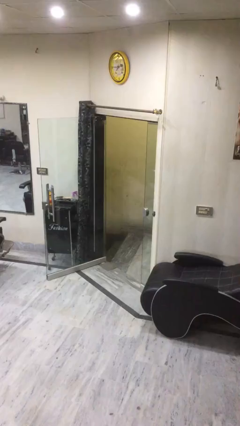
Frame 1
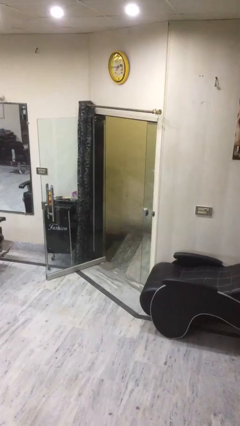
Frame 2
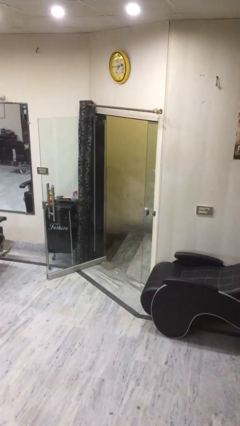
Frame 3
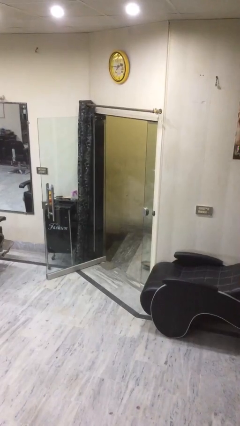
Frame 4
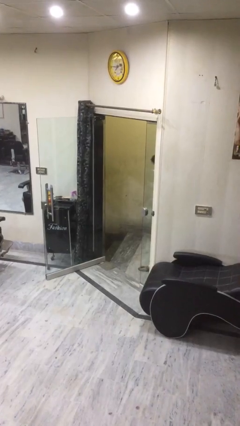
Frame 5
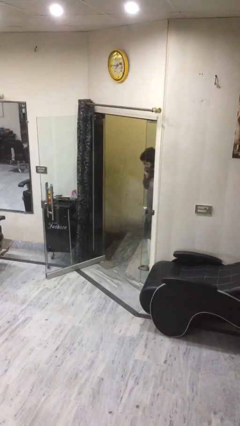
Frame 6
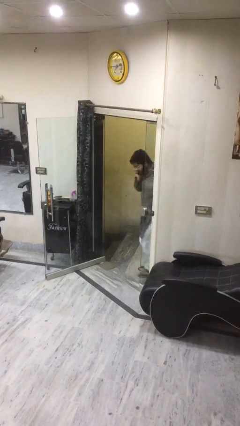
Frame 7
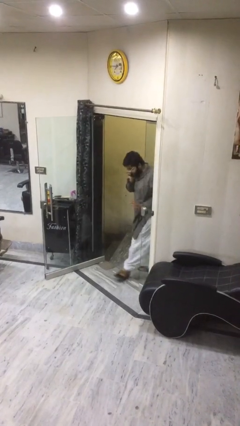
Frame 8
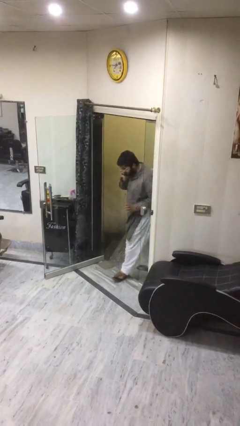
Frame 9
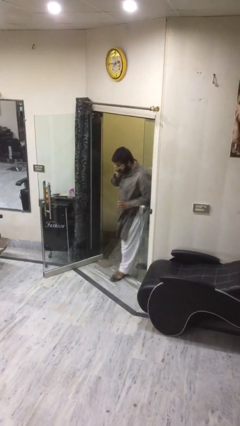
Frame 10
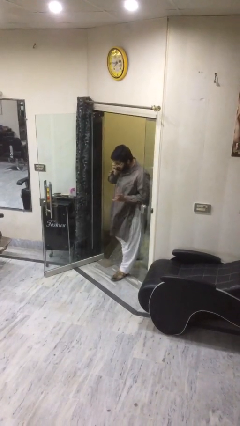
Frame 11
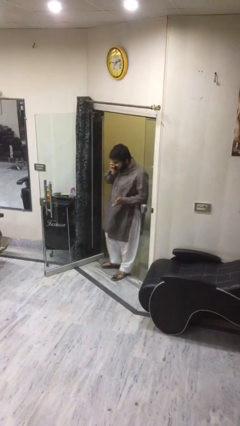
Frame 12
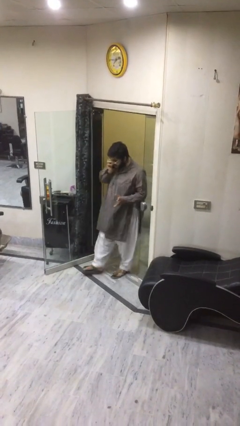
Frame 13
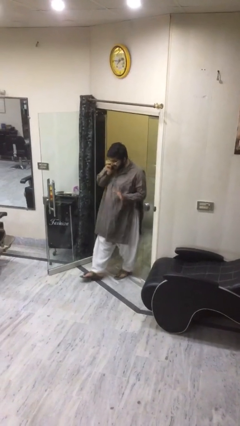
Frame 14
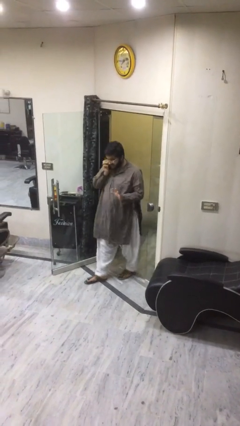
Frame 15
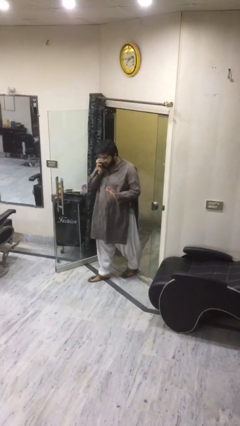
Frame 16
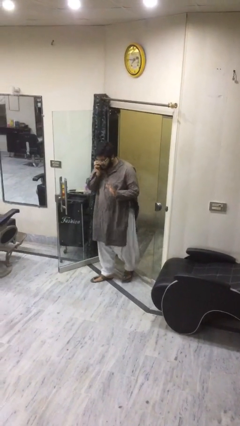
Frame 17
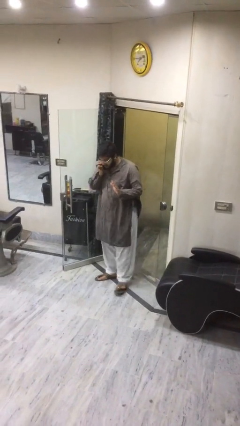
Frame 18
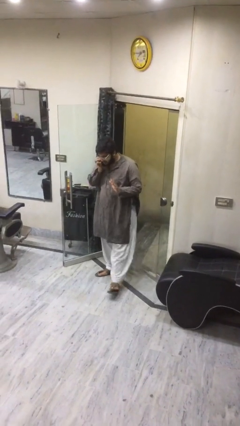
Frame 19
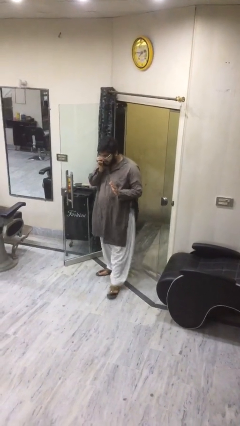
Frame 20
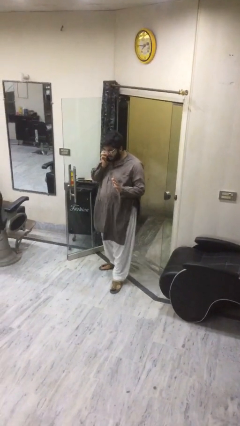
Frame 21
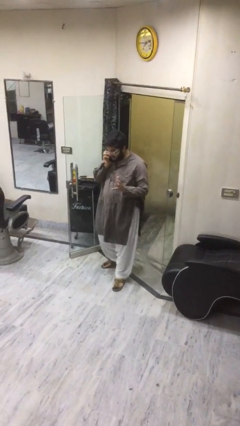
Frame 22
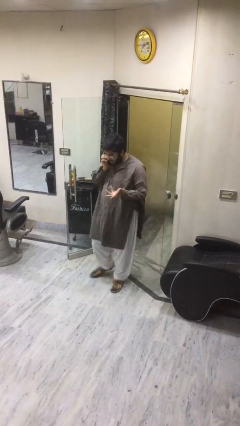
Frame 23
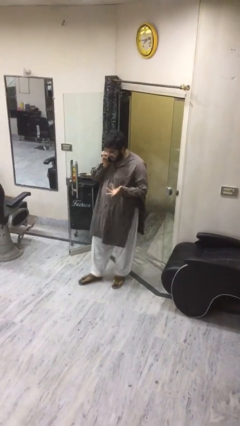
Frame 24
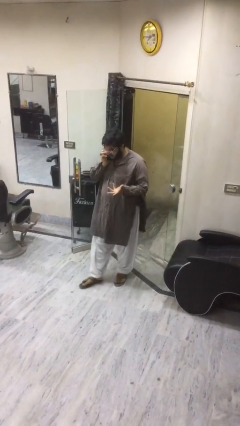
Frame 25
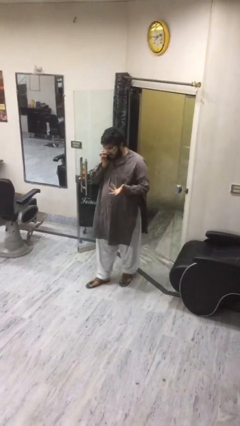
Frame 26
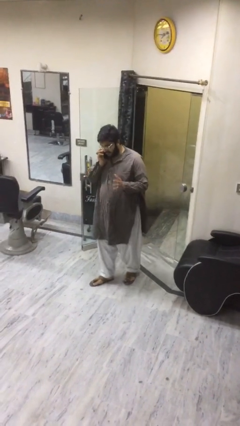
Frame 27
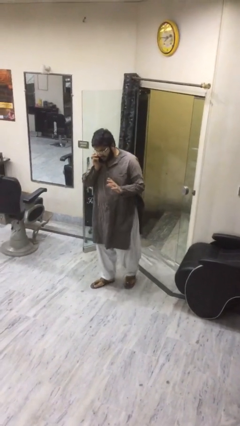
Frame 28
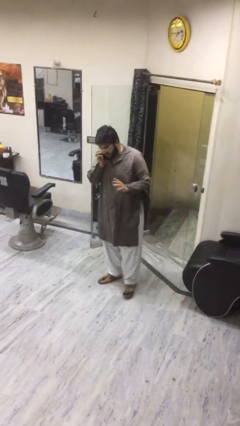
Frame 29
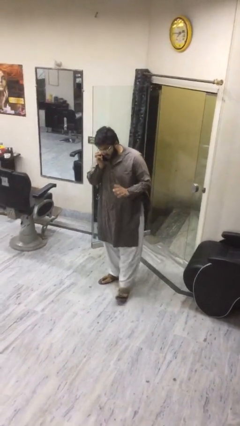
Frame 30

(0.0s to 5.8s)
person enters scene through structure

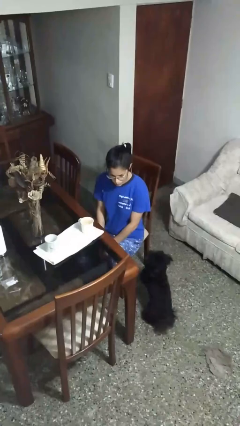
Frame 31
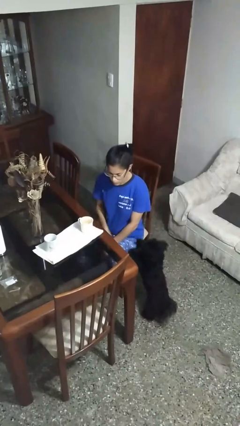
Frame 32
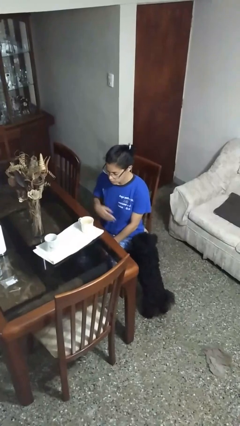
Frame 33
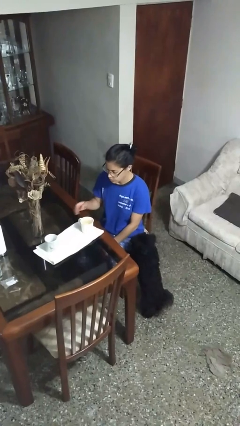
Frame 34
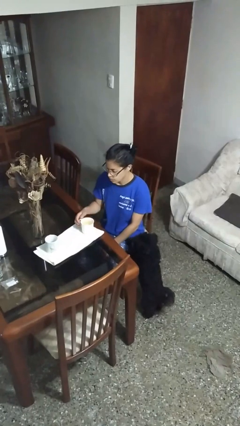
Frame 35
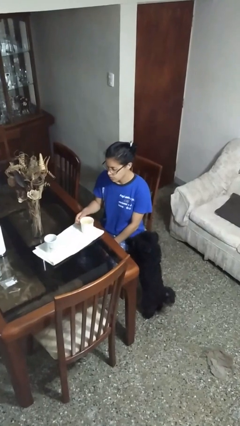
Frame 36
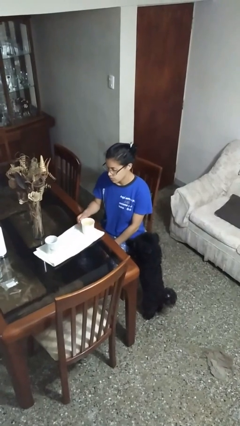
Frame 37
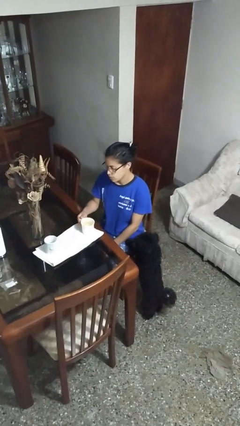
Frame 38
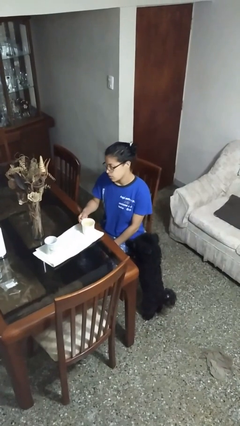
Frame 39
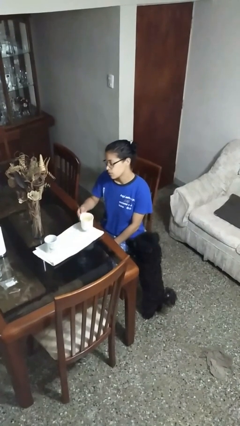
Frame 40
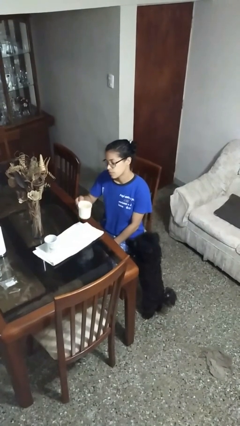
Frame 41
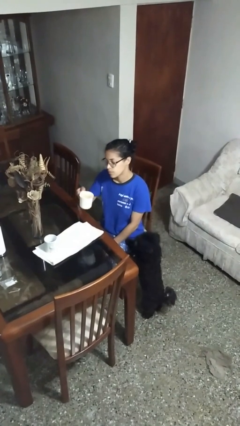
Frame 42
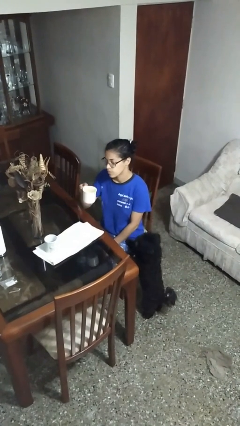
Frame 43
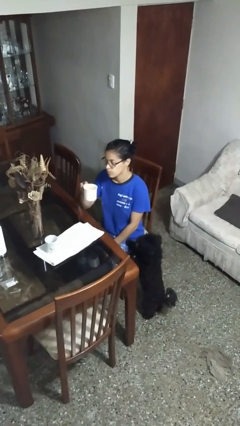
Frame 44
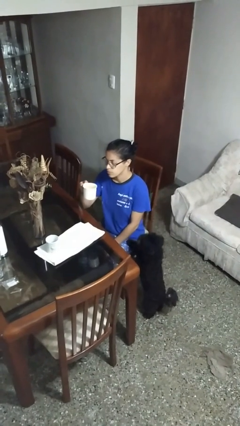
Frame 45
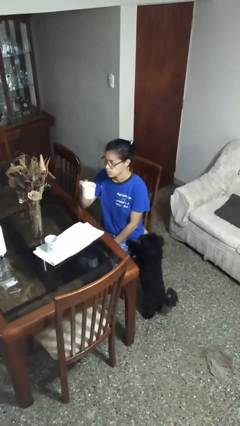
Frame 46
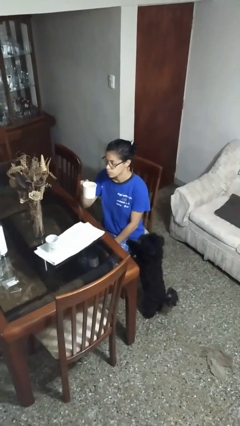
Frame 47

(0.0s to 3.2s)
person picks up object from table

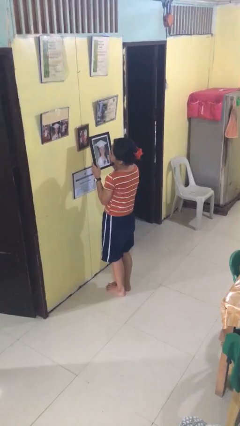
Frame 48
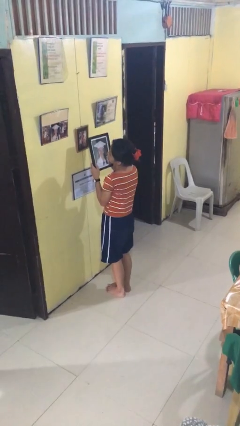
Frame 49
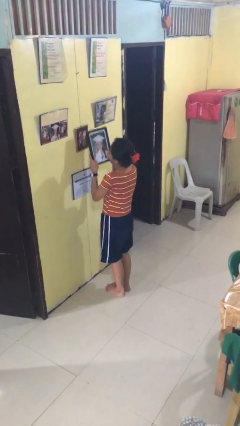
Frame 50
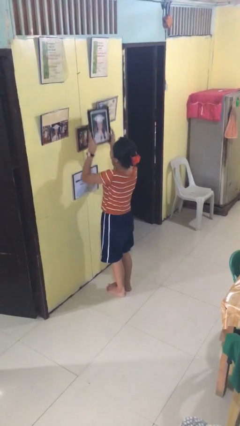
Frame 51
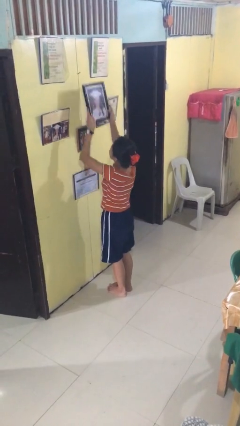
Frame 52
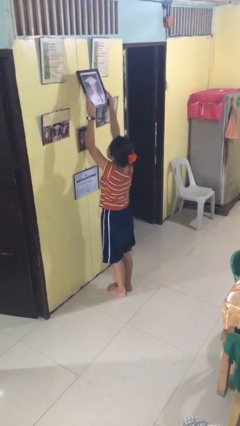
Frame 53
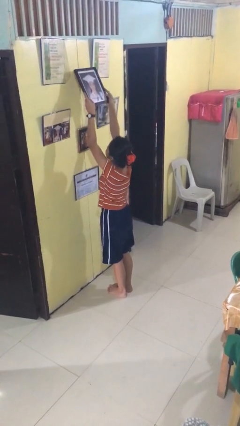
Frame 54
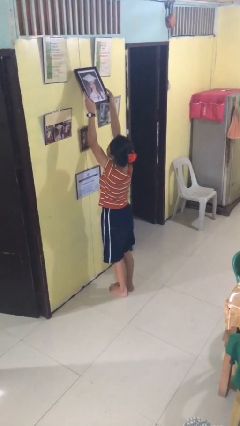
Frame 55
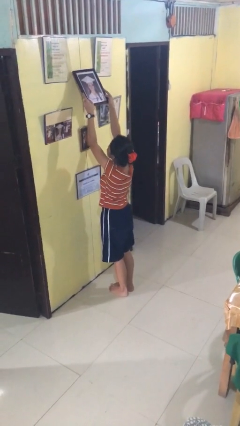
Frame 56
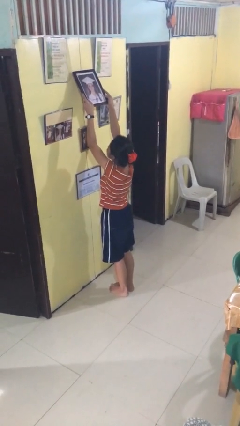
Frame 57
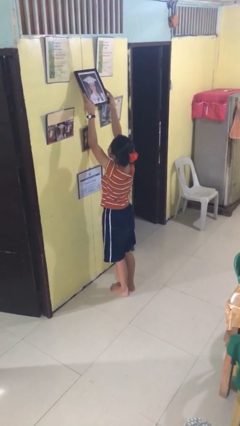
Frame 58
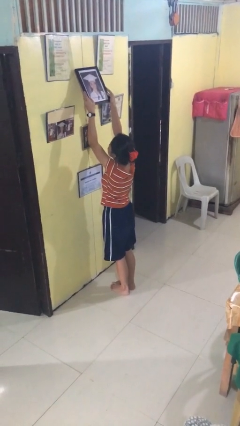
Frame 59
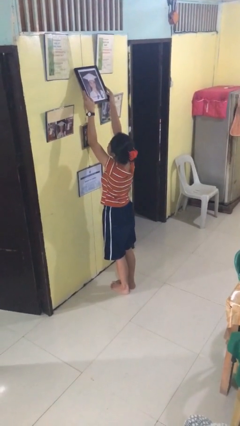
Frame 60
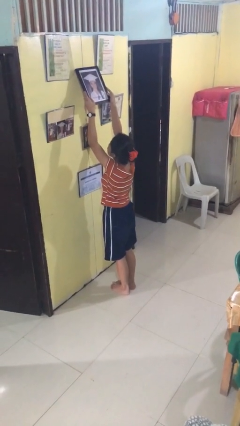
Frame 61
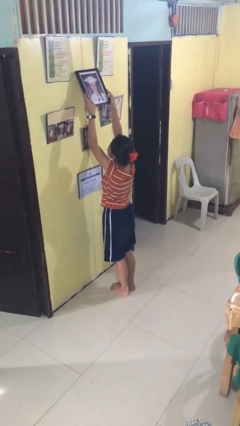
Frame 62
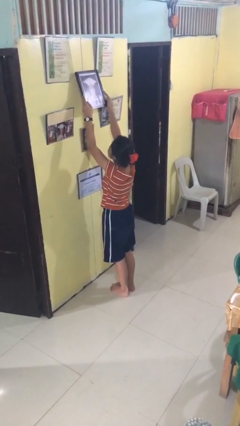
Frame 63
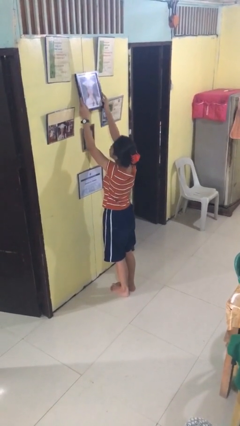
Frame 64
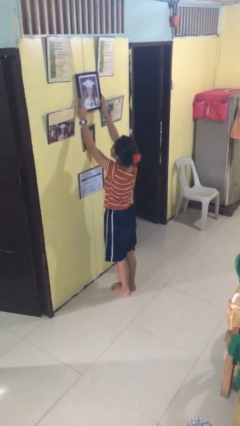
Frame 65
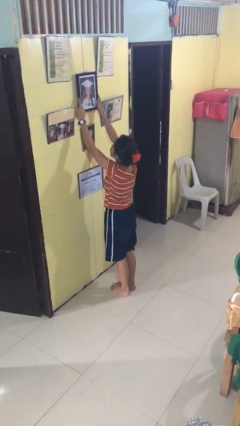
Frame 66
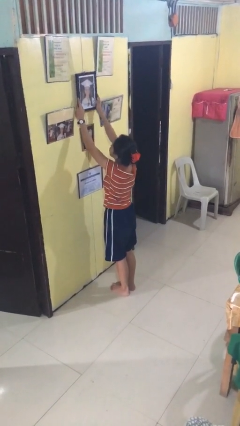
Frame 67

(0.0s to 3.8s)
person puts up picture frame

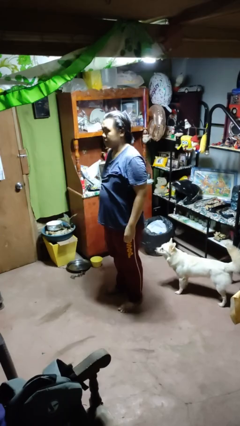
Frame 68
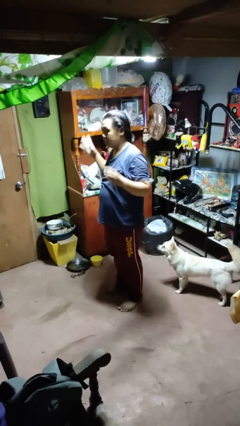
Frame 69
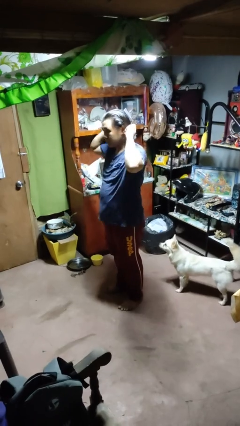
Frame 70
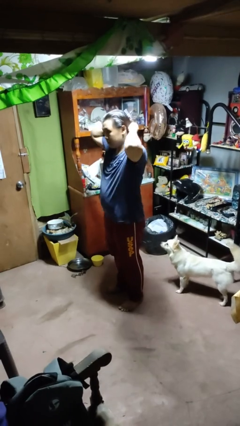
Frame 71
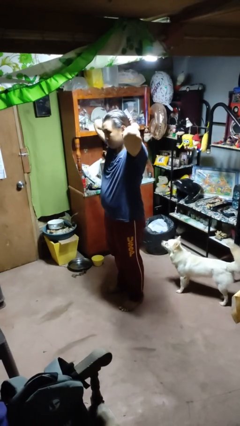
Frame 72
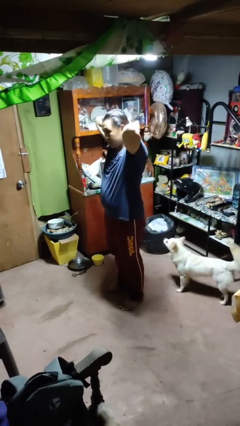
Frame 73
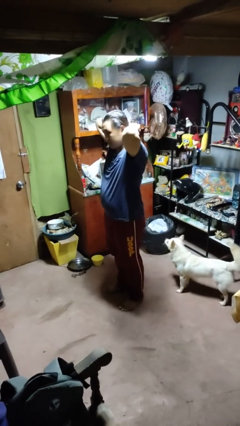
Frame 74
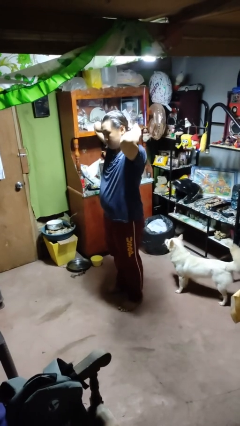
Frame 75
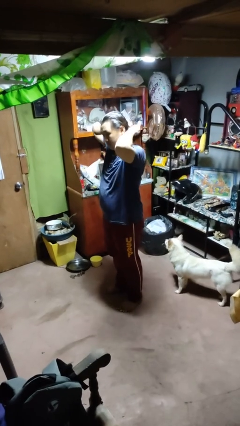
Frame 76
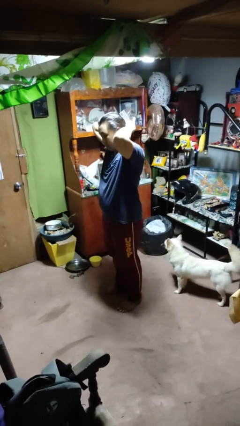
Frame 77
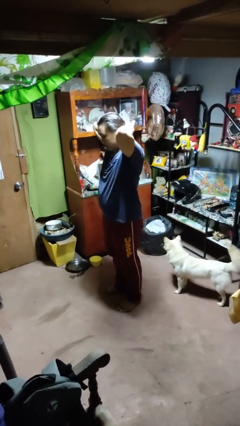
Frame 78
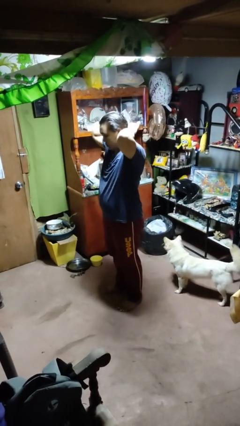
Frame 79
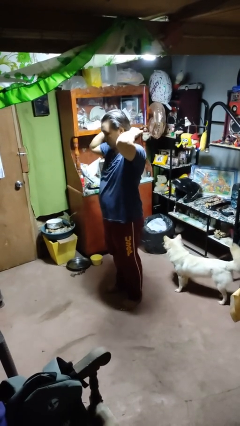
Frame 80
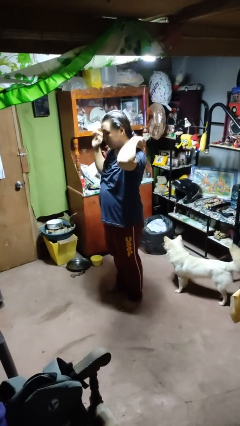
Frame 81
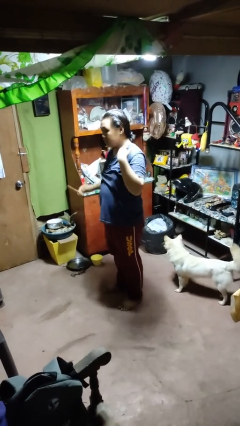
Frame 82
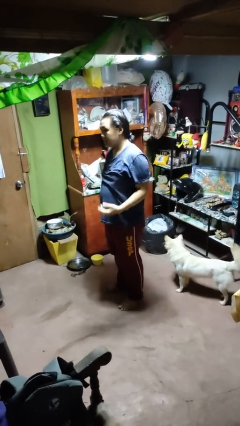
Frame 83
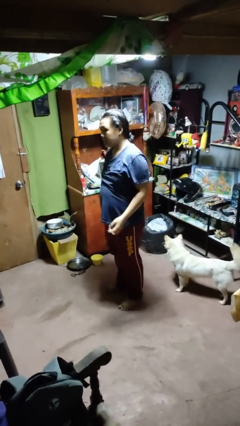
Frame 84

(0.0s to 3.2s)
person puts hair in ponytail

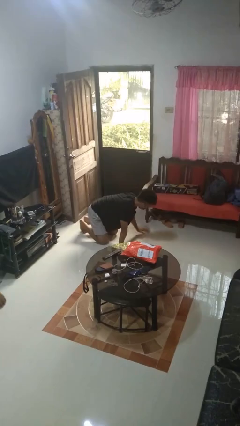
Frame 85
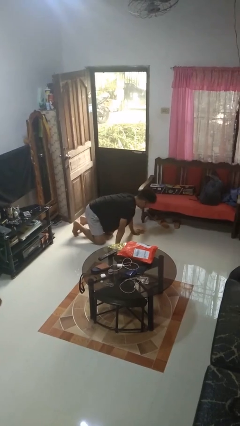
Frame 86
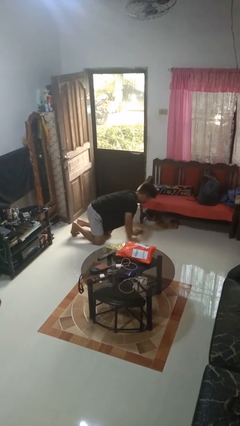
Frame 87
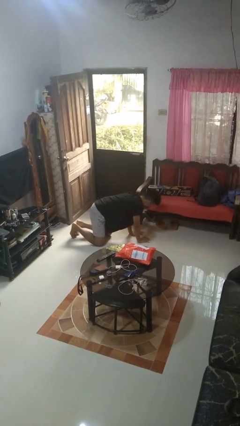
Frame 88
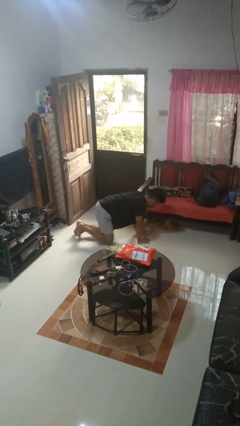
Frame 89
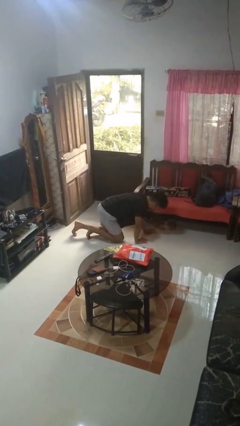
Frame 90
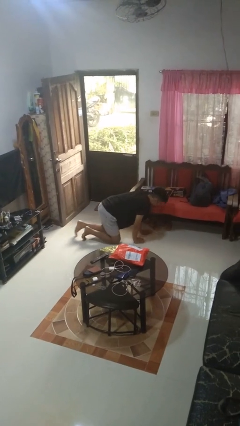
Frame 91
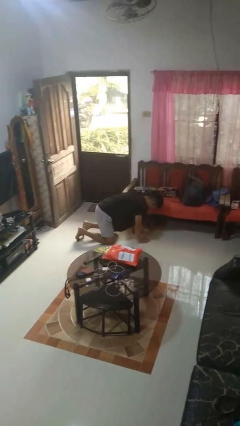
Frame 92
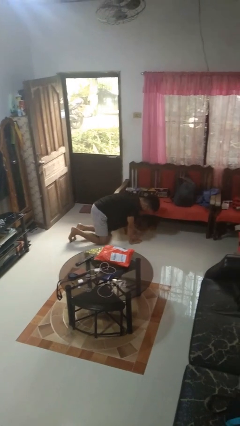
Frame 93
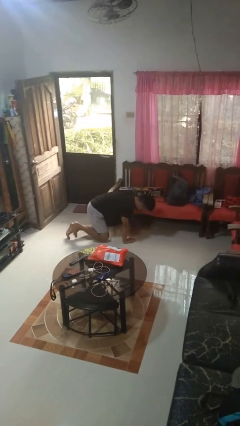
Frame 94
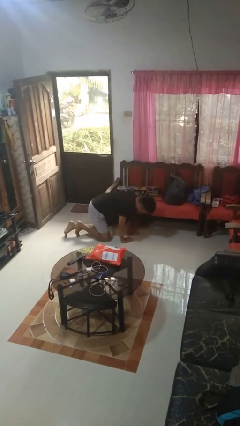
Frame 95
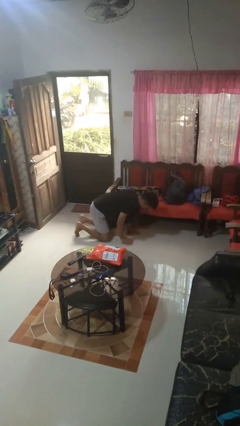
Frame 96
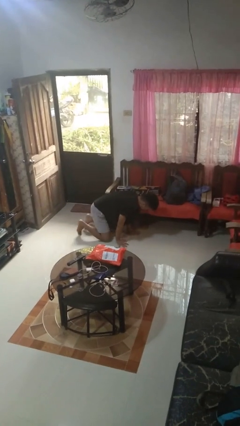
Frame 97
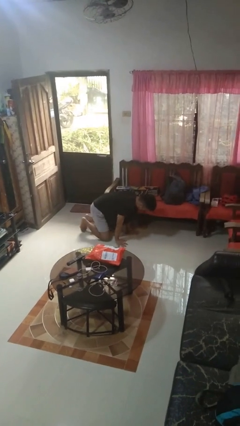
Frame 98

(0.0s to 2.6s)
person crawls
